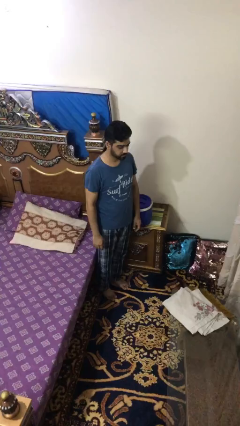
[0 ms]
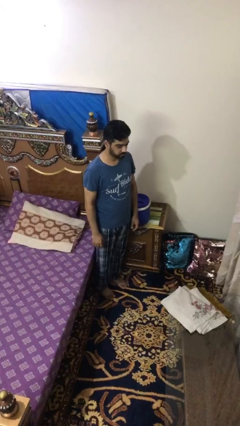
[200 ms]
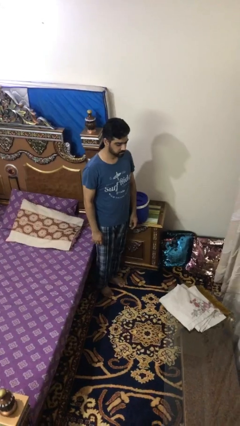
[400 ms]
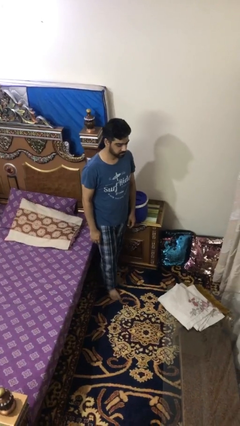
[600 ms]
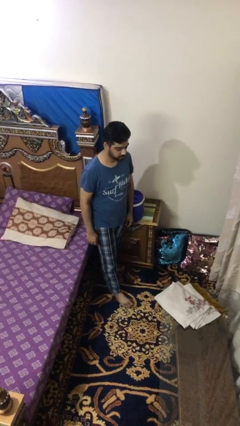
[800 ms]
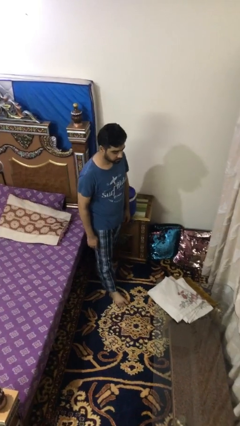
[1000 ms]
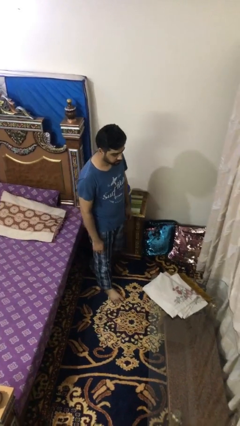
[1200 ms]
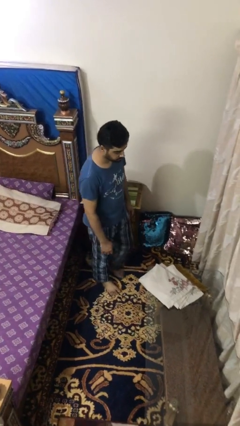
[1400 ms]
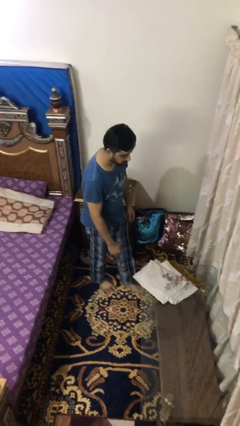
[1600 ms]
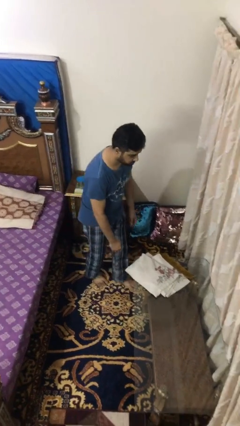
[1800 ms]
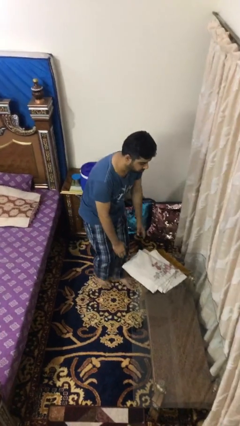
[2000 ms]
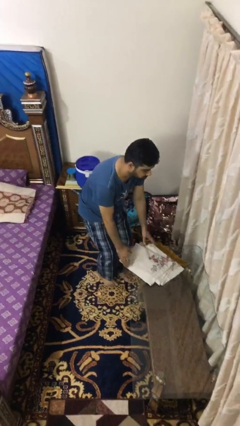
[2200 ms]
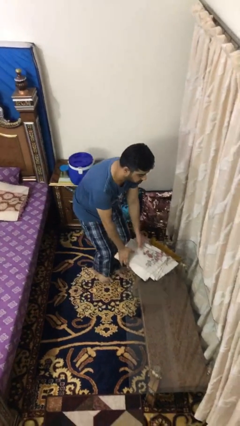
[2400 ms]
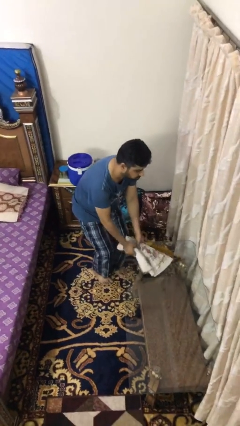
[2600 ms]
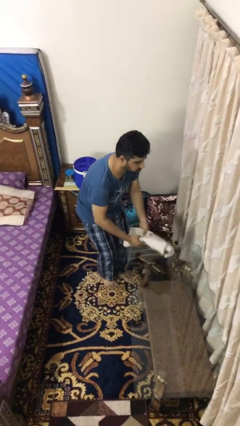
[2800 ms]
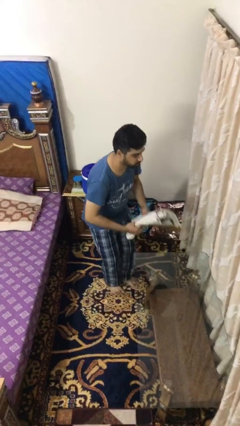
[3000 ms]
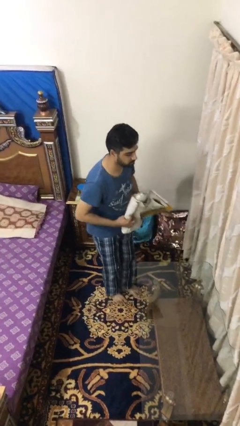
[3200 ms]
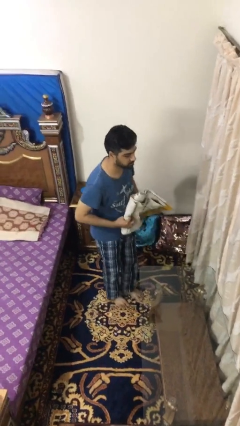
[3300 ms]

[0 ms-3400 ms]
person picks up object from table

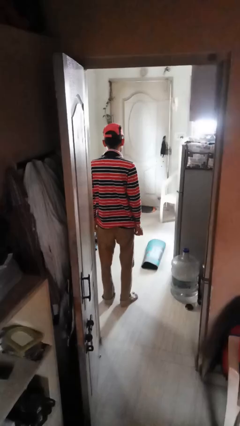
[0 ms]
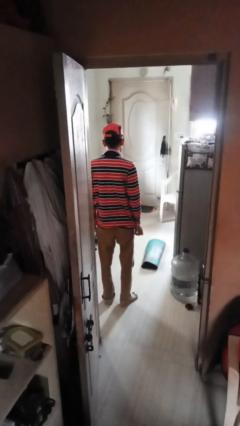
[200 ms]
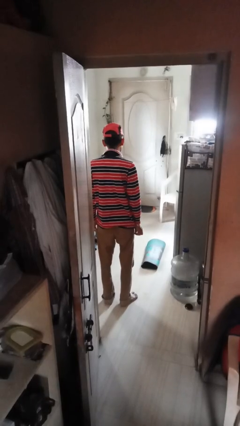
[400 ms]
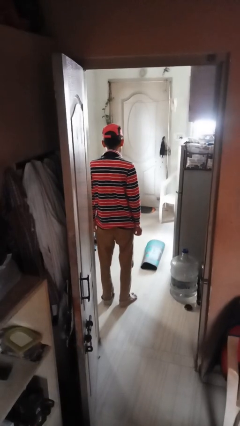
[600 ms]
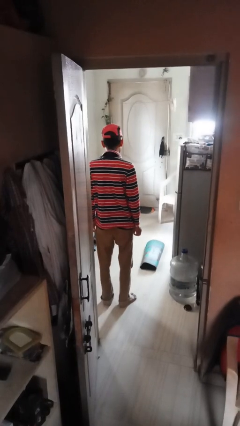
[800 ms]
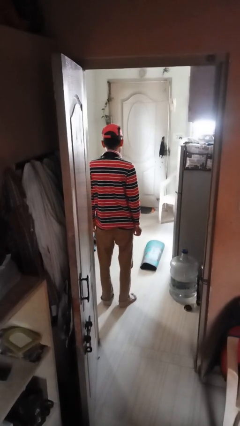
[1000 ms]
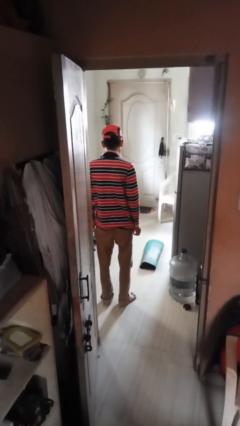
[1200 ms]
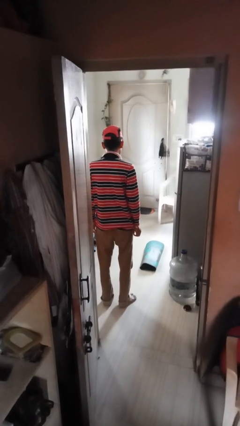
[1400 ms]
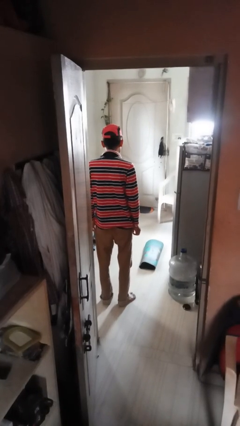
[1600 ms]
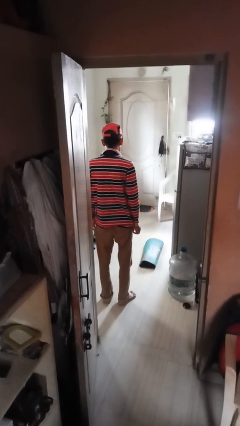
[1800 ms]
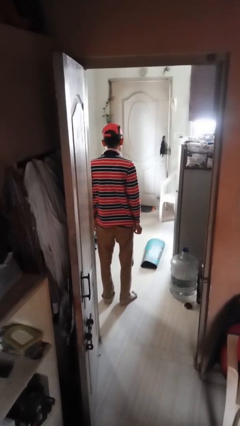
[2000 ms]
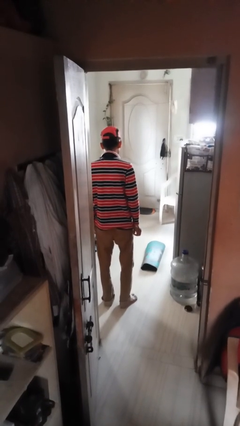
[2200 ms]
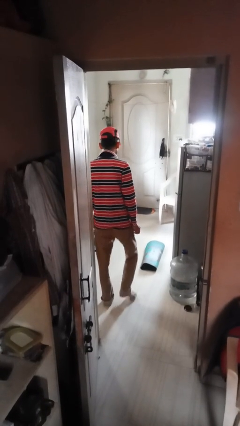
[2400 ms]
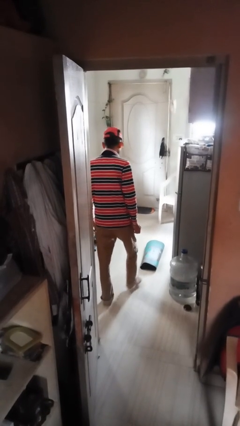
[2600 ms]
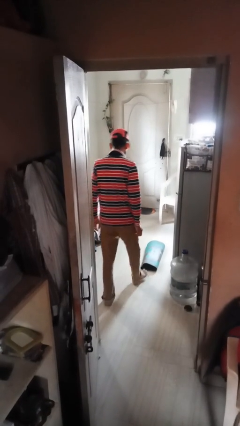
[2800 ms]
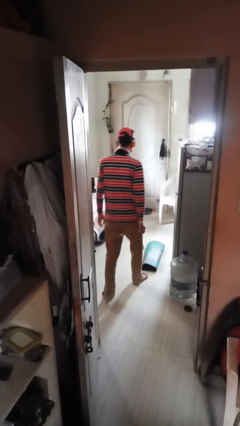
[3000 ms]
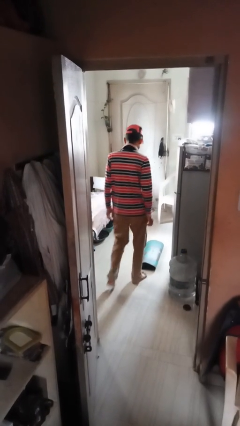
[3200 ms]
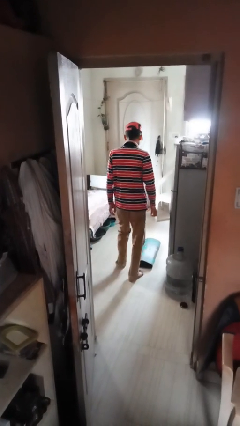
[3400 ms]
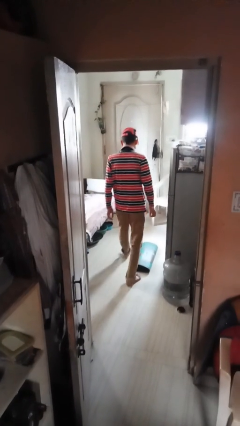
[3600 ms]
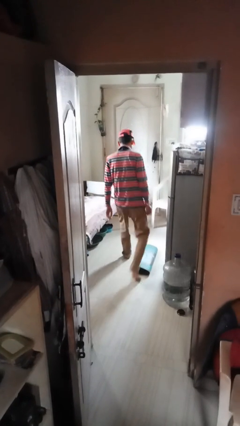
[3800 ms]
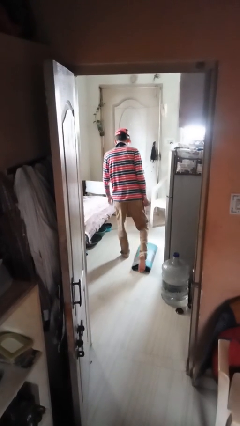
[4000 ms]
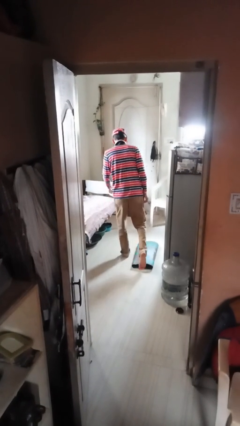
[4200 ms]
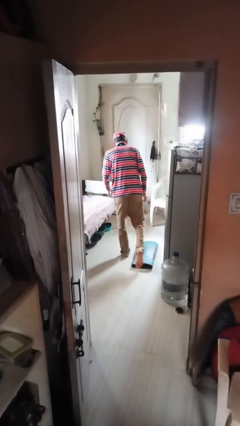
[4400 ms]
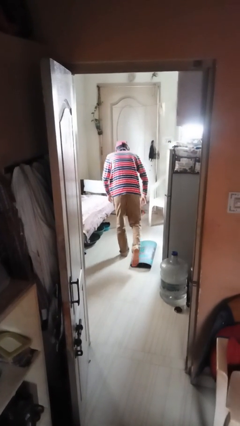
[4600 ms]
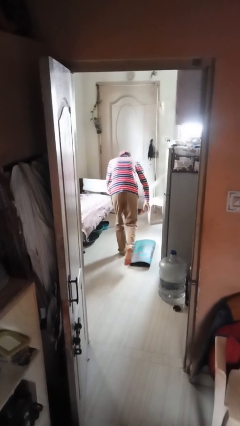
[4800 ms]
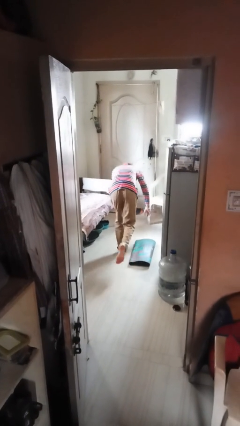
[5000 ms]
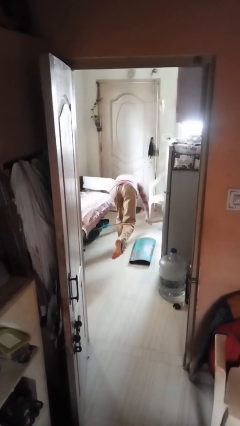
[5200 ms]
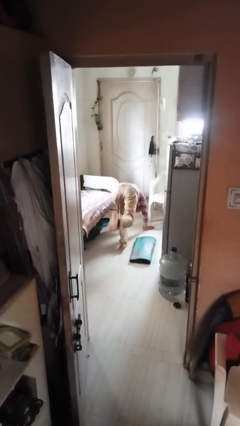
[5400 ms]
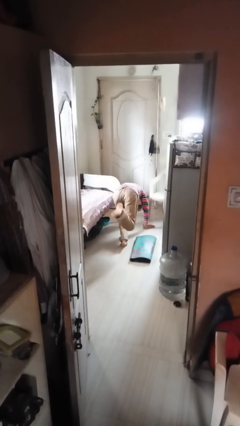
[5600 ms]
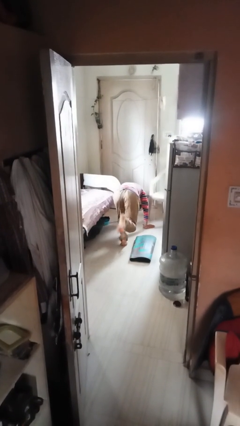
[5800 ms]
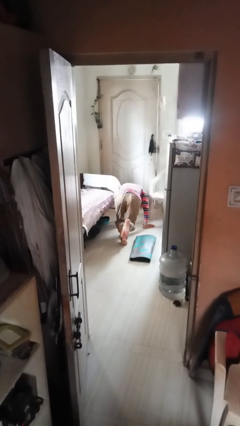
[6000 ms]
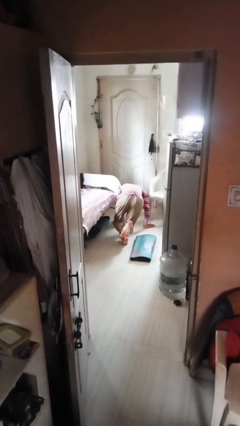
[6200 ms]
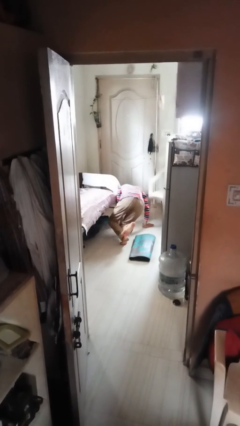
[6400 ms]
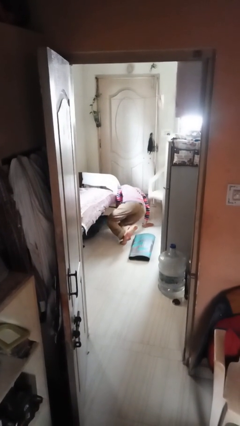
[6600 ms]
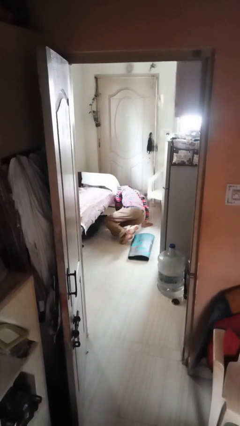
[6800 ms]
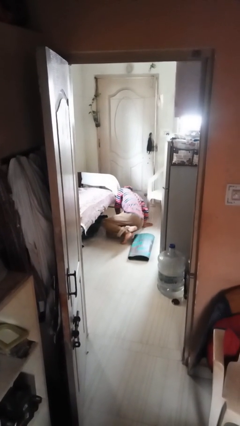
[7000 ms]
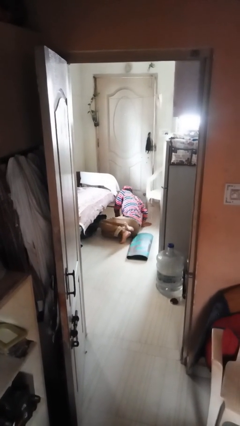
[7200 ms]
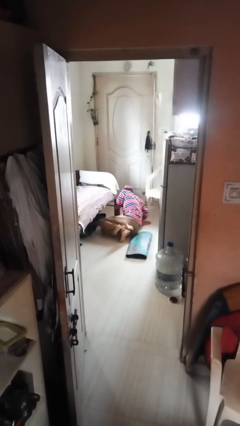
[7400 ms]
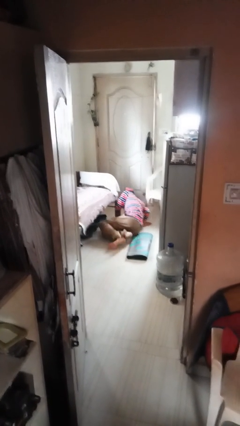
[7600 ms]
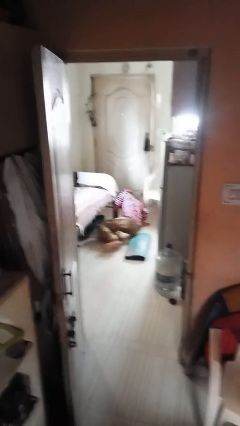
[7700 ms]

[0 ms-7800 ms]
person trips on object on floor

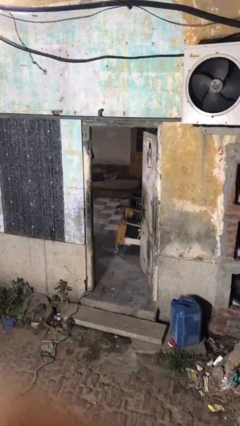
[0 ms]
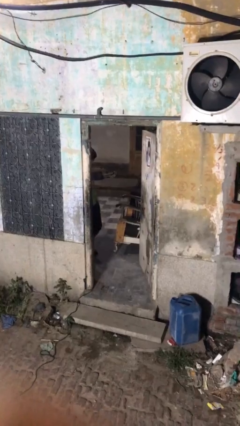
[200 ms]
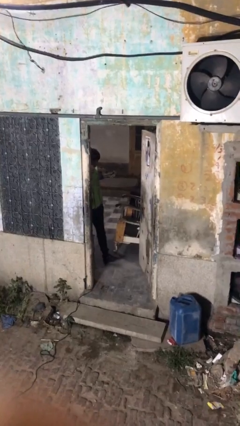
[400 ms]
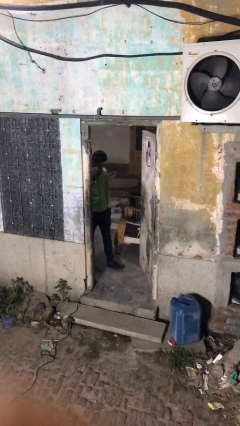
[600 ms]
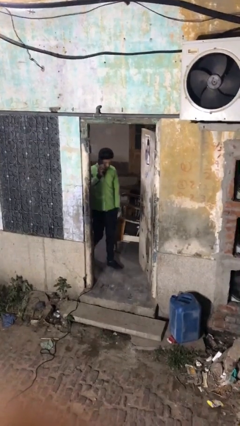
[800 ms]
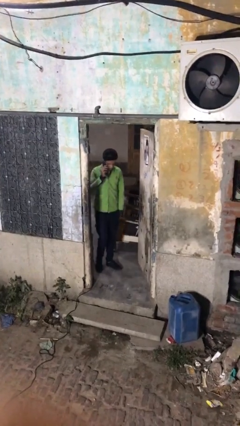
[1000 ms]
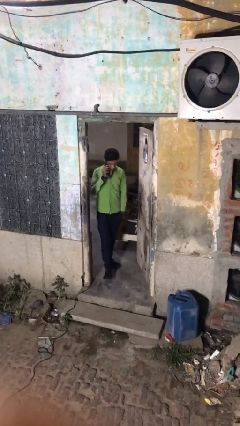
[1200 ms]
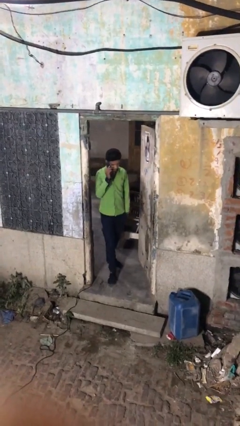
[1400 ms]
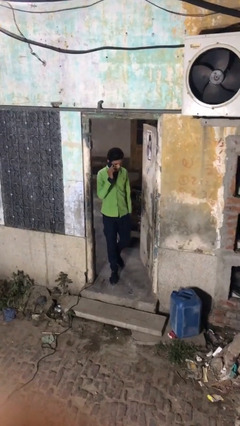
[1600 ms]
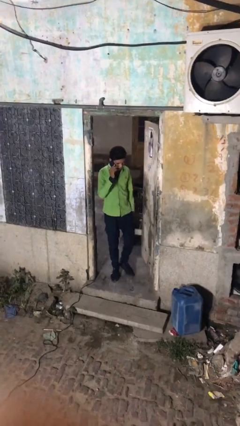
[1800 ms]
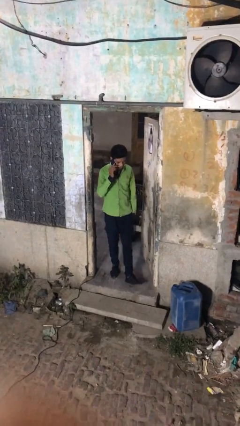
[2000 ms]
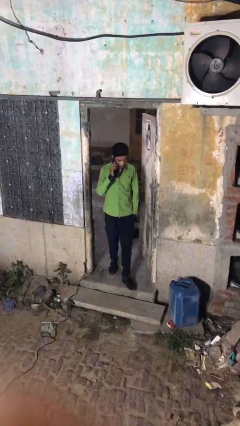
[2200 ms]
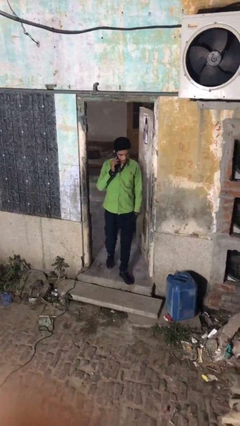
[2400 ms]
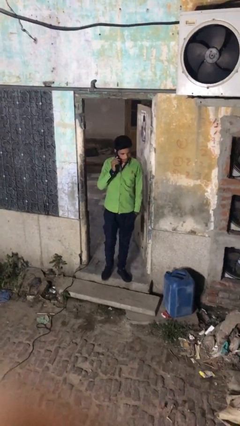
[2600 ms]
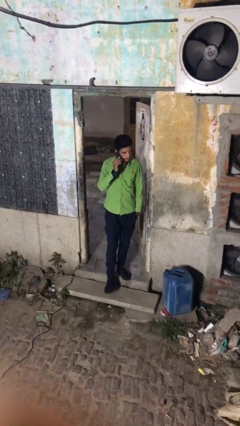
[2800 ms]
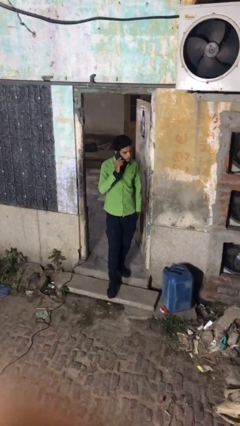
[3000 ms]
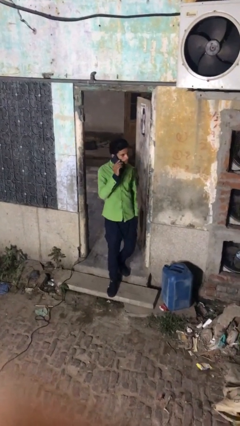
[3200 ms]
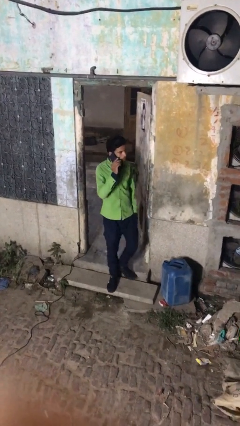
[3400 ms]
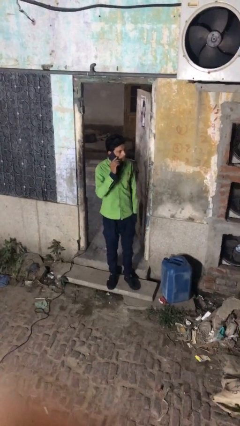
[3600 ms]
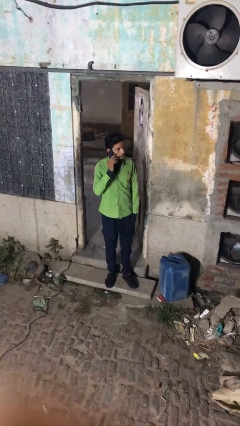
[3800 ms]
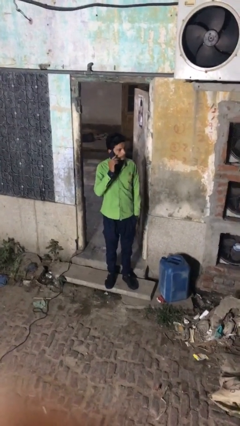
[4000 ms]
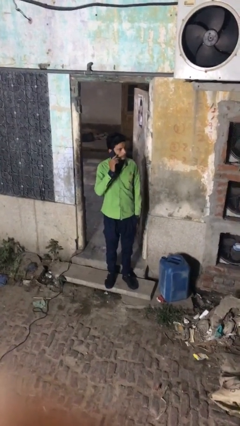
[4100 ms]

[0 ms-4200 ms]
person enters scene through structure

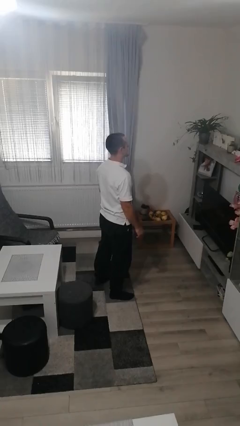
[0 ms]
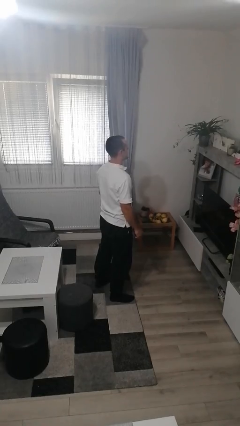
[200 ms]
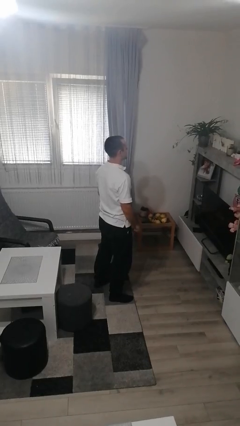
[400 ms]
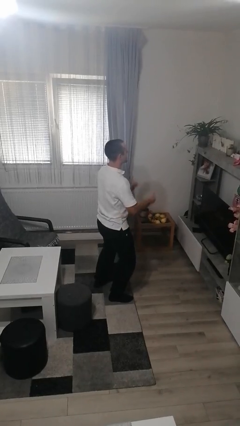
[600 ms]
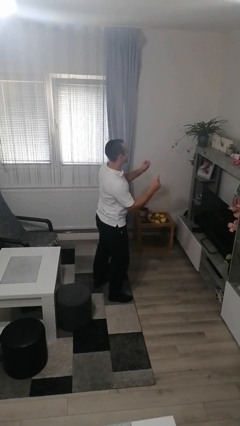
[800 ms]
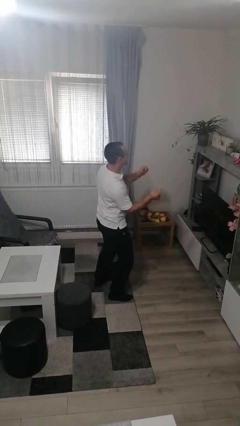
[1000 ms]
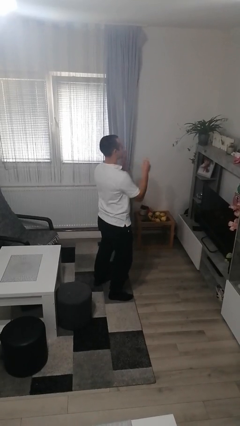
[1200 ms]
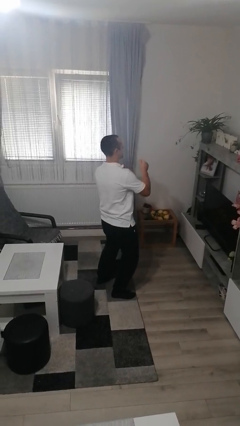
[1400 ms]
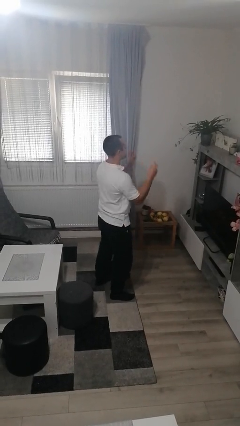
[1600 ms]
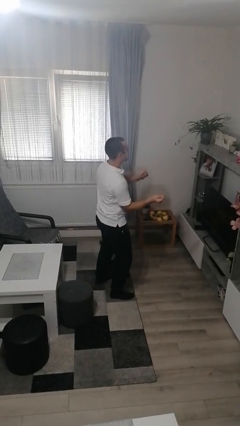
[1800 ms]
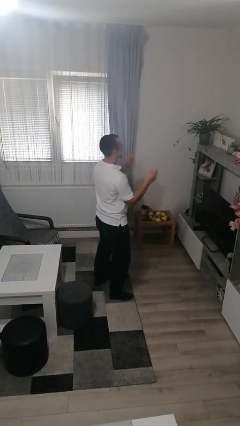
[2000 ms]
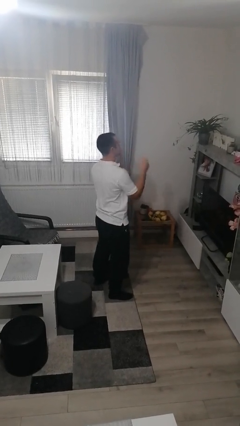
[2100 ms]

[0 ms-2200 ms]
person dances in place

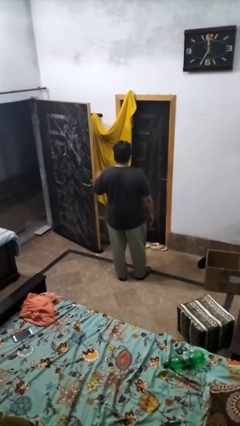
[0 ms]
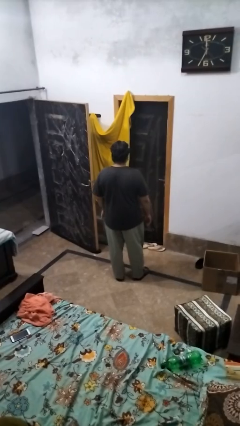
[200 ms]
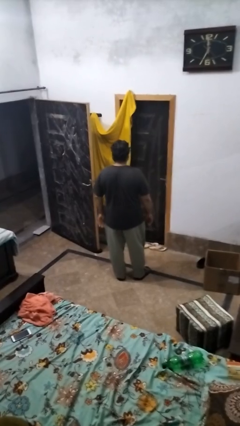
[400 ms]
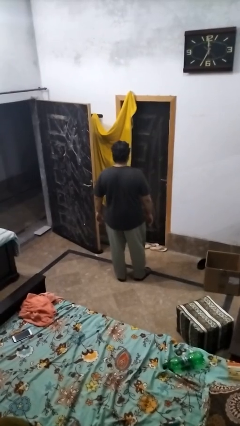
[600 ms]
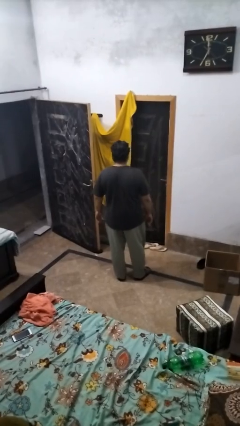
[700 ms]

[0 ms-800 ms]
person gestures stop
